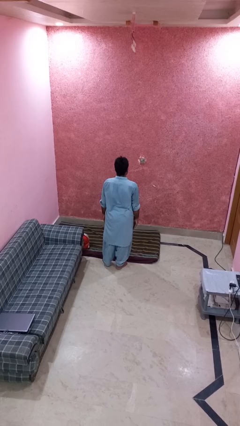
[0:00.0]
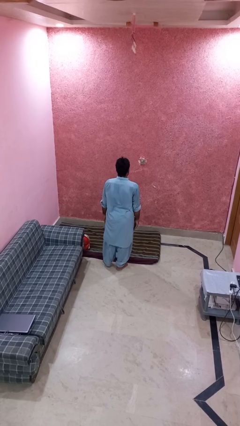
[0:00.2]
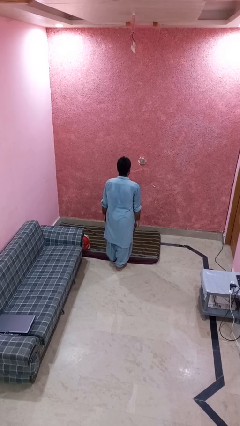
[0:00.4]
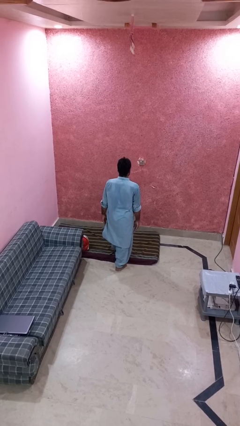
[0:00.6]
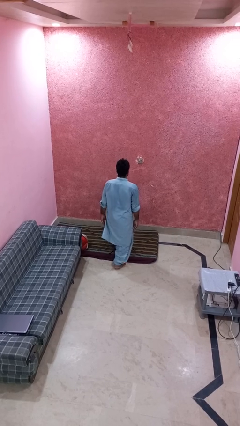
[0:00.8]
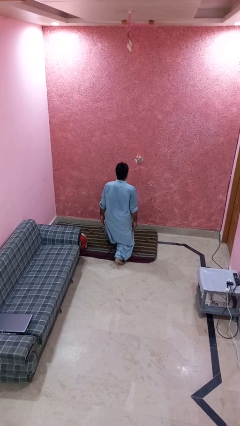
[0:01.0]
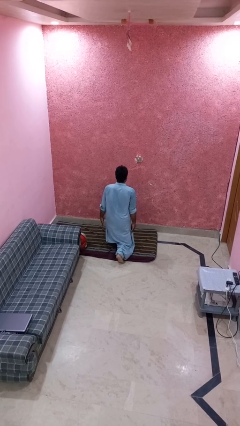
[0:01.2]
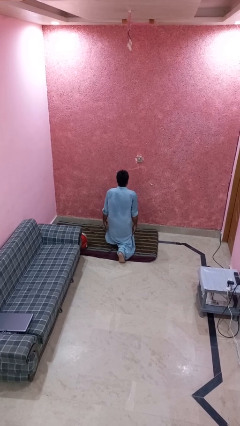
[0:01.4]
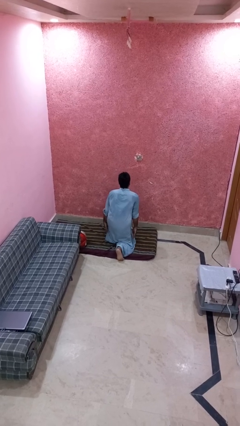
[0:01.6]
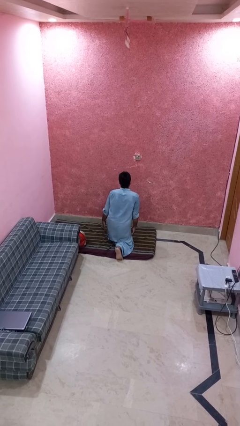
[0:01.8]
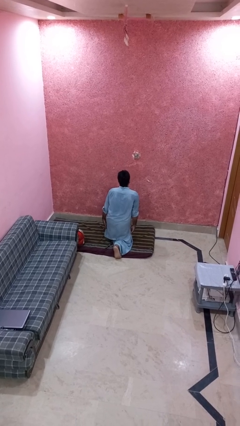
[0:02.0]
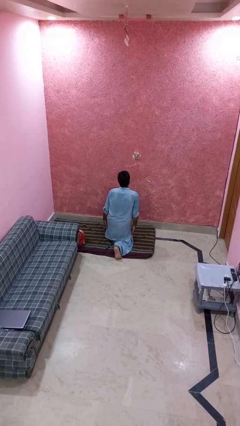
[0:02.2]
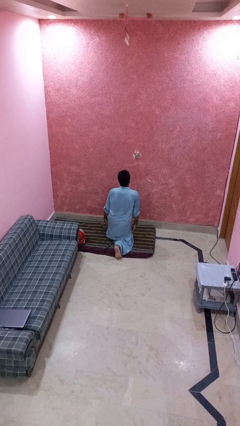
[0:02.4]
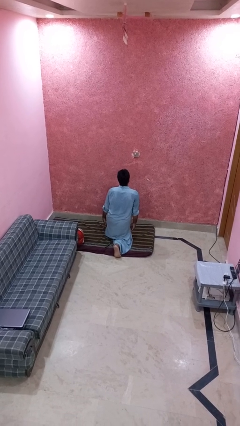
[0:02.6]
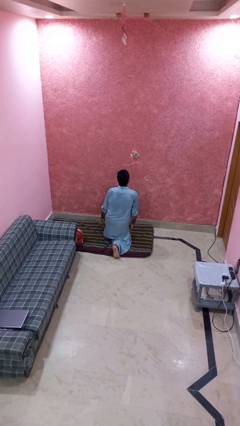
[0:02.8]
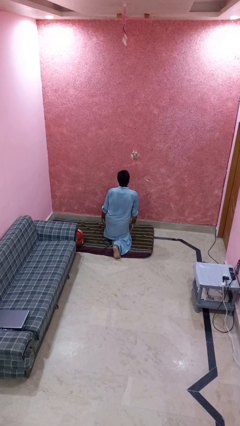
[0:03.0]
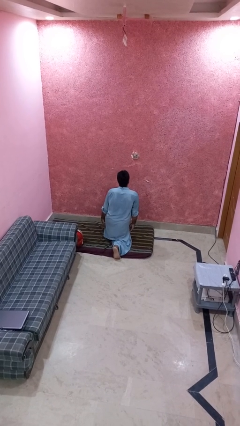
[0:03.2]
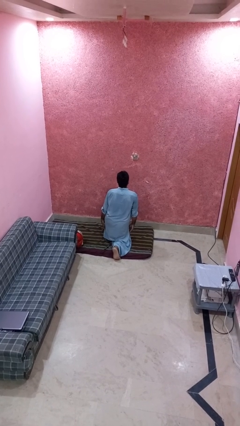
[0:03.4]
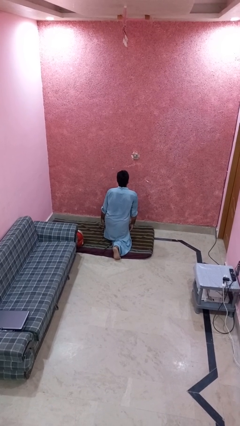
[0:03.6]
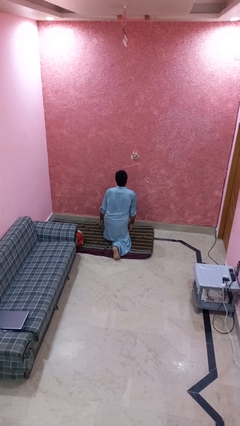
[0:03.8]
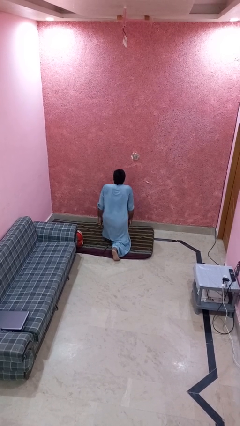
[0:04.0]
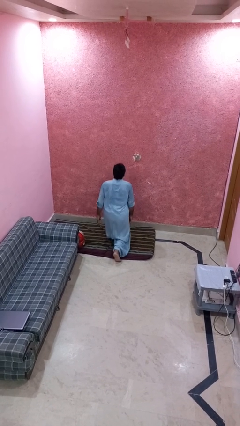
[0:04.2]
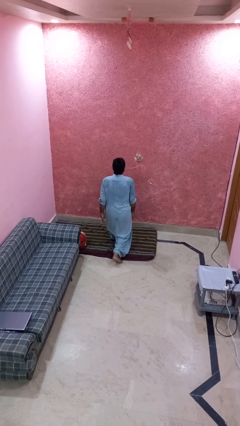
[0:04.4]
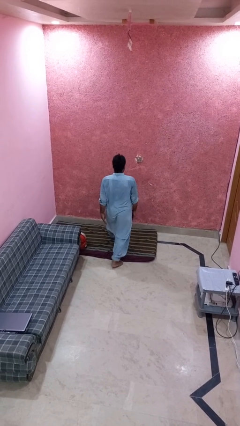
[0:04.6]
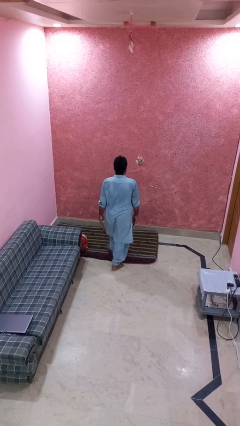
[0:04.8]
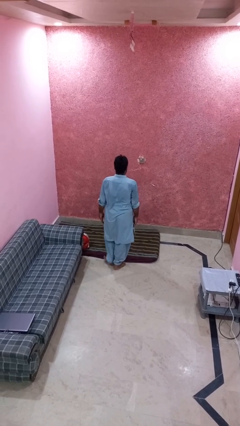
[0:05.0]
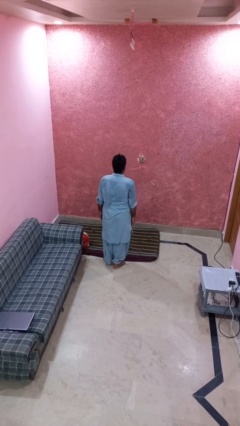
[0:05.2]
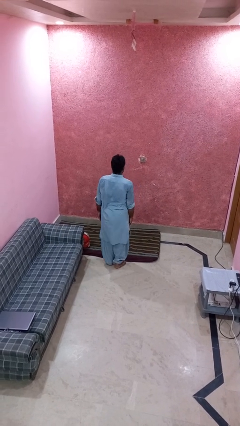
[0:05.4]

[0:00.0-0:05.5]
person exercises with lunges

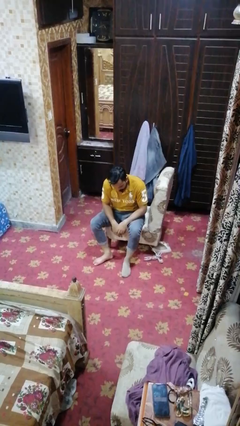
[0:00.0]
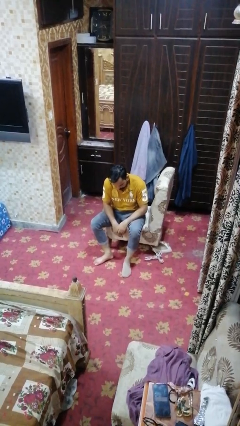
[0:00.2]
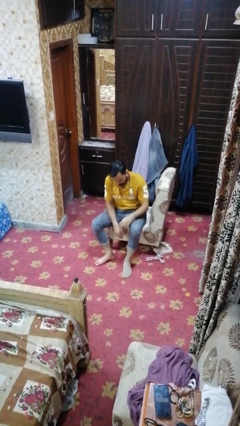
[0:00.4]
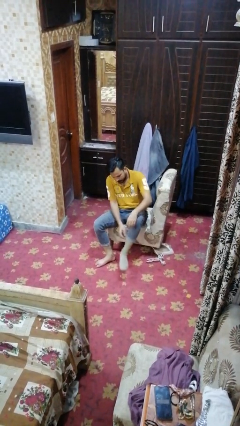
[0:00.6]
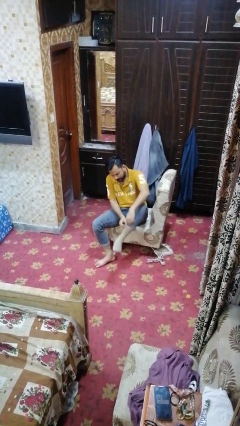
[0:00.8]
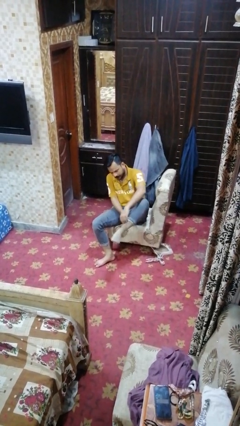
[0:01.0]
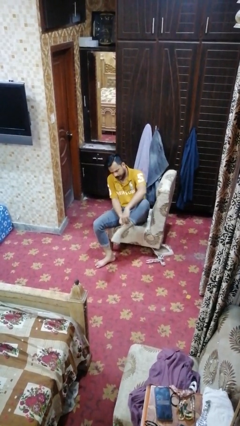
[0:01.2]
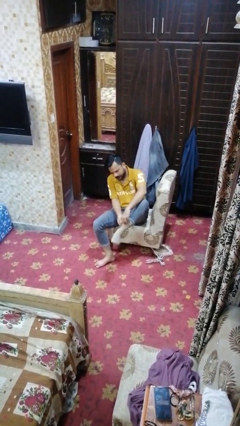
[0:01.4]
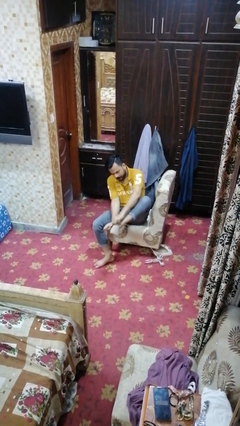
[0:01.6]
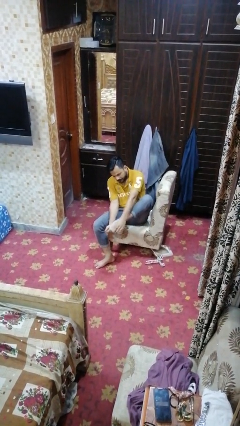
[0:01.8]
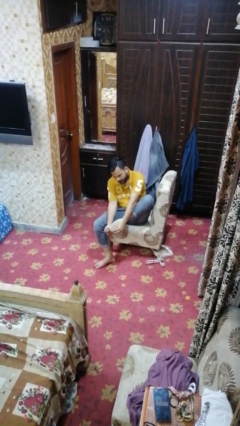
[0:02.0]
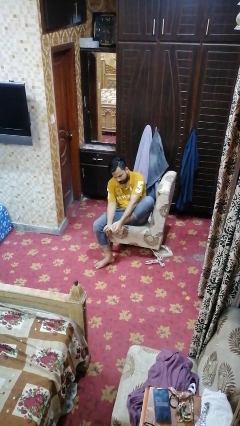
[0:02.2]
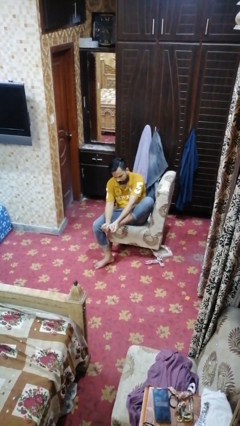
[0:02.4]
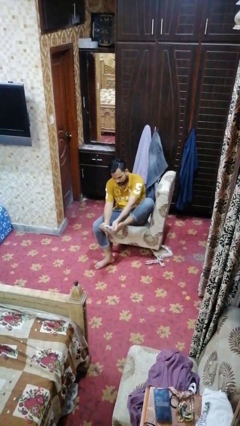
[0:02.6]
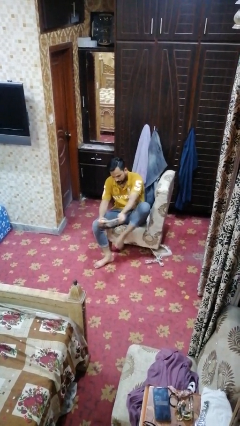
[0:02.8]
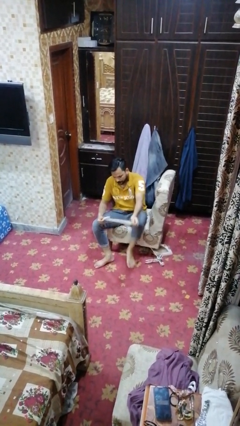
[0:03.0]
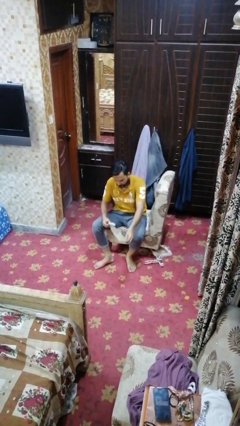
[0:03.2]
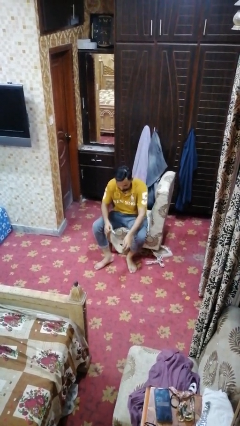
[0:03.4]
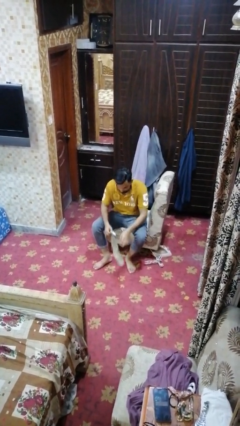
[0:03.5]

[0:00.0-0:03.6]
person takes off socks

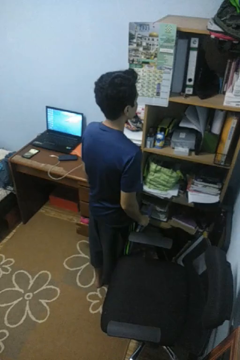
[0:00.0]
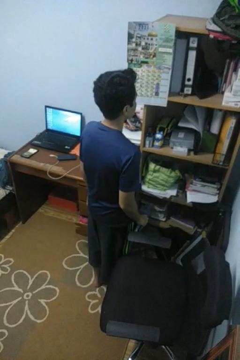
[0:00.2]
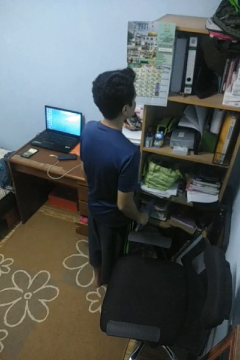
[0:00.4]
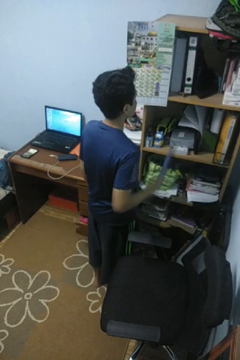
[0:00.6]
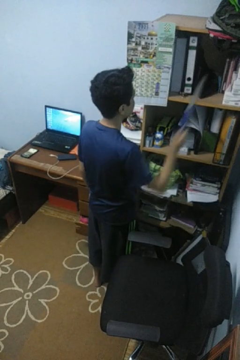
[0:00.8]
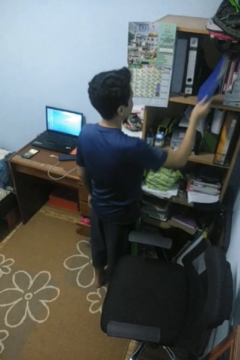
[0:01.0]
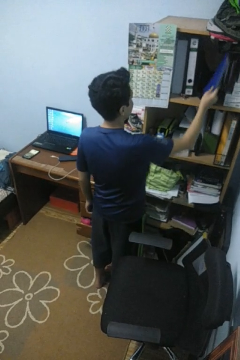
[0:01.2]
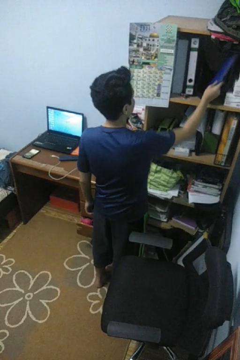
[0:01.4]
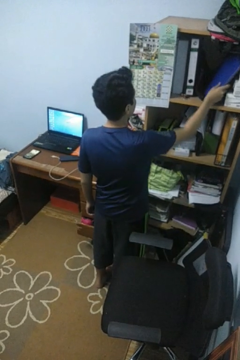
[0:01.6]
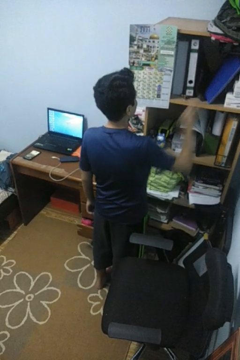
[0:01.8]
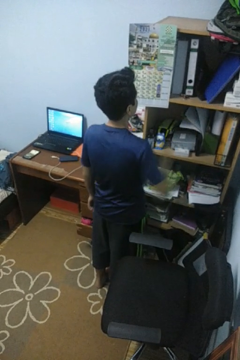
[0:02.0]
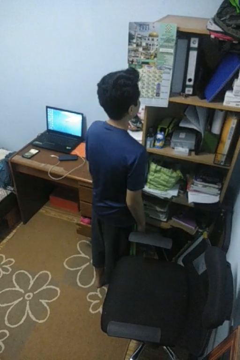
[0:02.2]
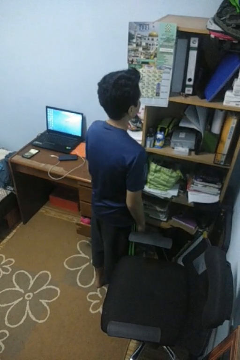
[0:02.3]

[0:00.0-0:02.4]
person puts down object into cabinet

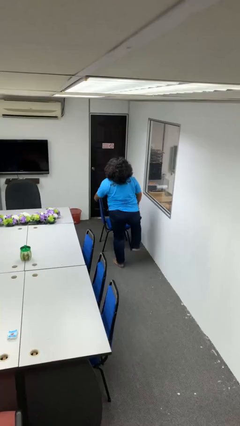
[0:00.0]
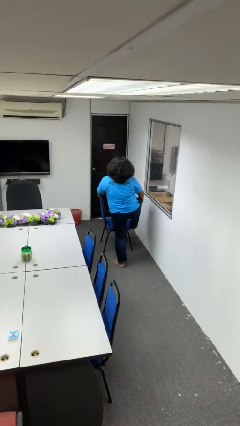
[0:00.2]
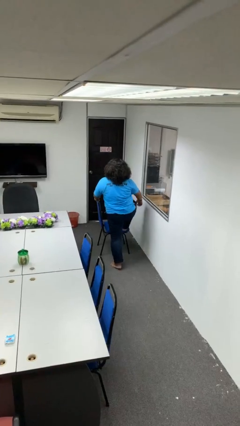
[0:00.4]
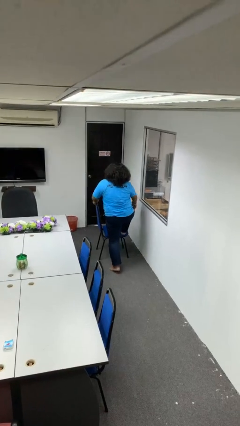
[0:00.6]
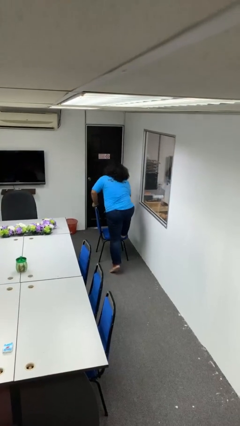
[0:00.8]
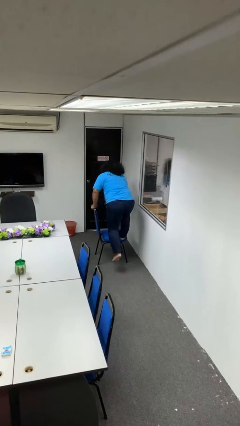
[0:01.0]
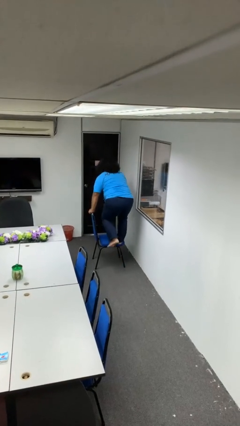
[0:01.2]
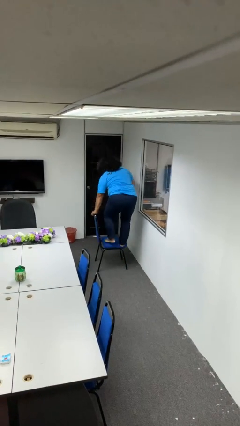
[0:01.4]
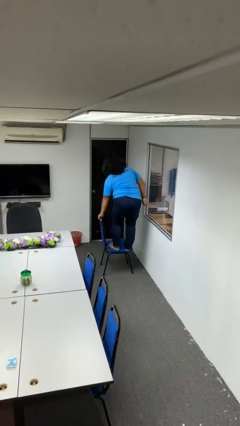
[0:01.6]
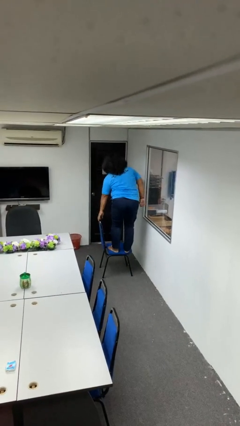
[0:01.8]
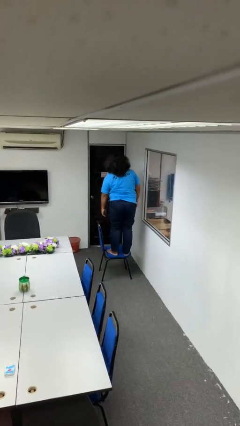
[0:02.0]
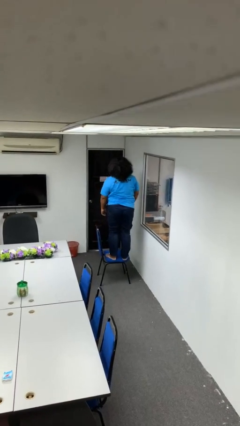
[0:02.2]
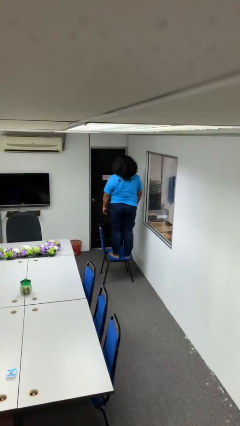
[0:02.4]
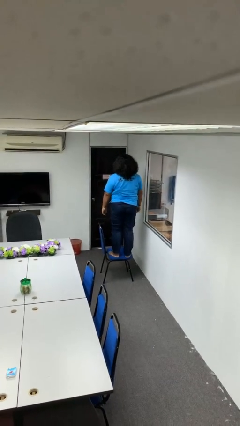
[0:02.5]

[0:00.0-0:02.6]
person climbs on chair

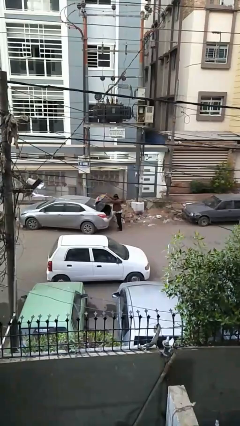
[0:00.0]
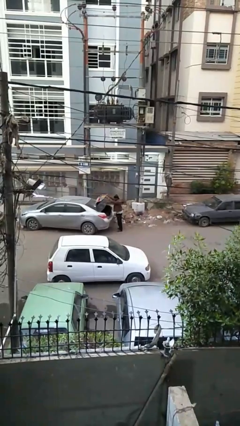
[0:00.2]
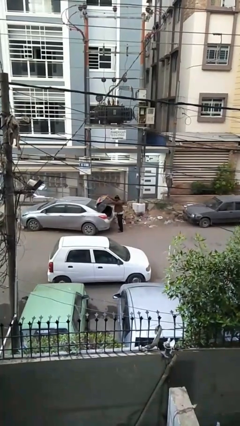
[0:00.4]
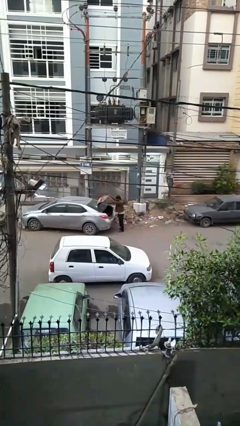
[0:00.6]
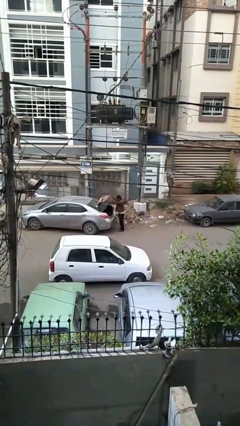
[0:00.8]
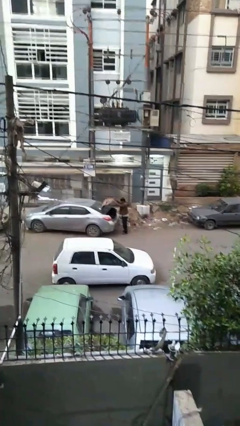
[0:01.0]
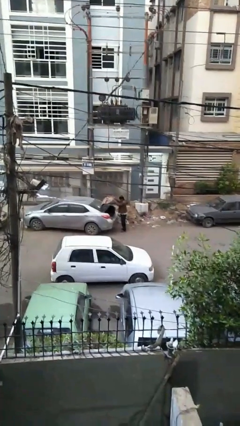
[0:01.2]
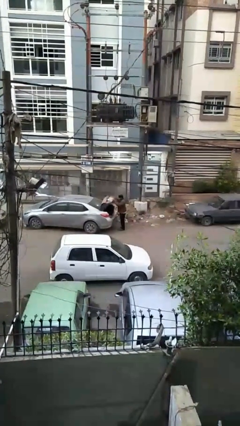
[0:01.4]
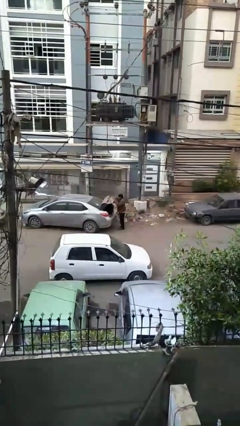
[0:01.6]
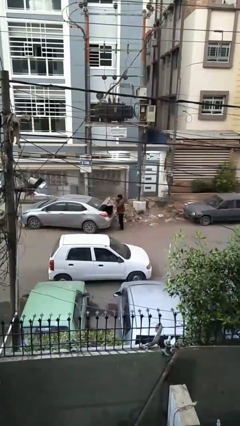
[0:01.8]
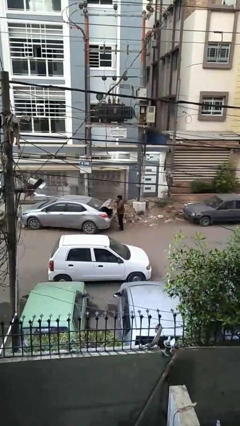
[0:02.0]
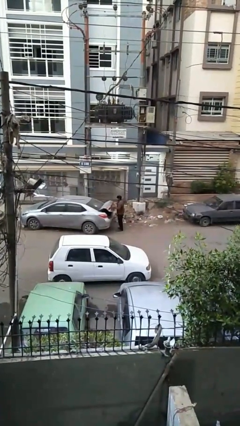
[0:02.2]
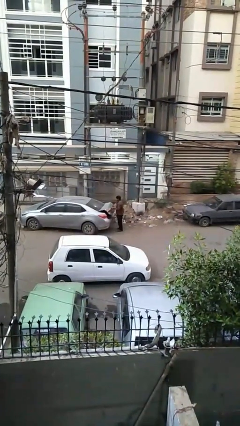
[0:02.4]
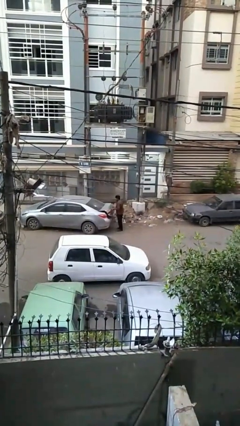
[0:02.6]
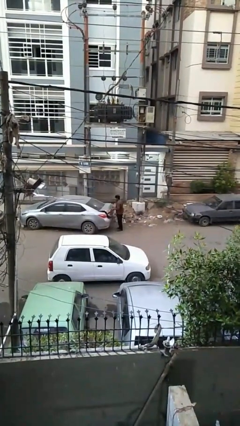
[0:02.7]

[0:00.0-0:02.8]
person closes car trunk

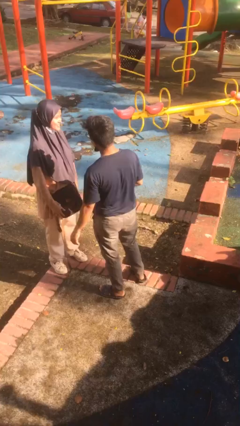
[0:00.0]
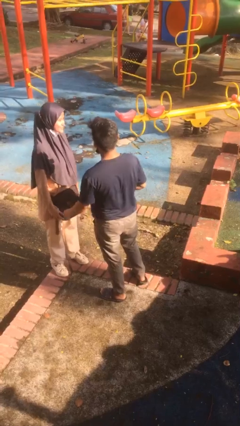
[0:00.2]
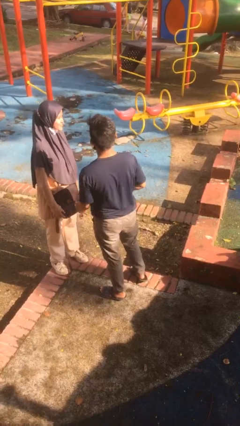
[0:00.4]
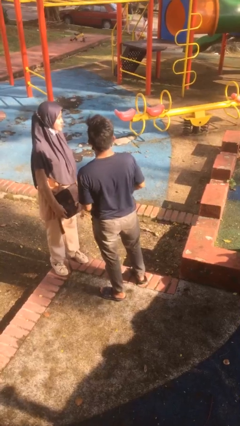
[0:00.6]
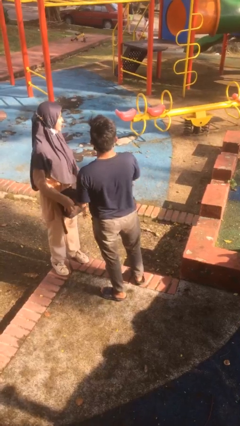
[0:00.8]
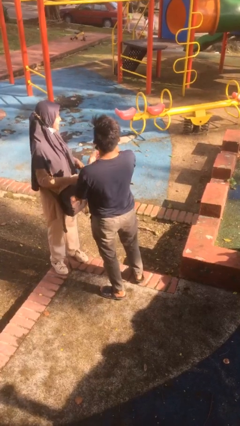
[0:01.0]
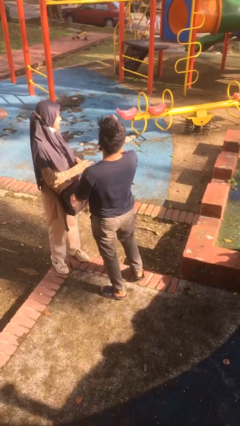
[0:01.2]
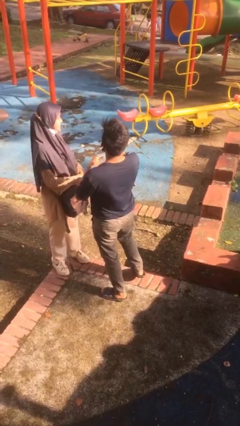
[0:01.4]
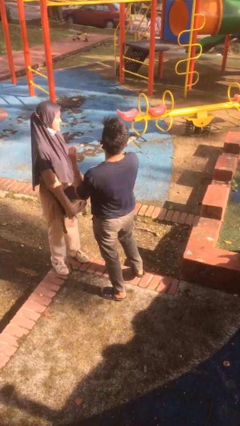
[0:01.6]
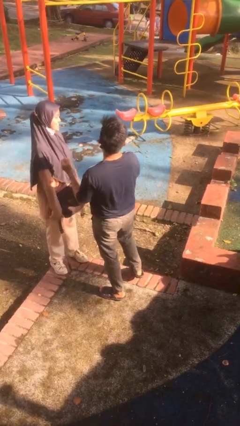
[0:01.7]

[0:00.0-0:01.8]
person laughs with person
